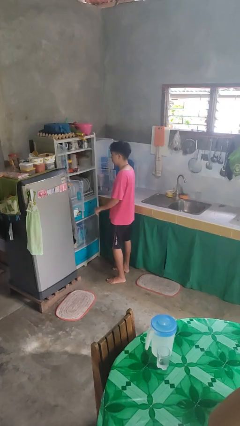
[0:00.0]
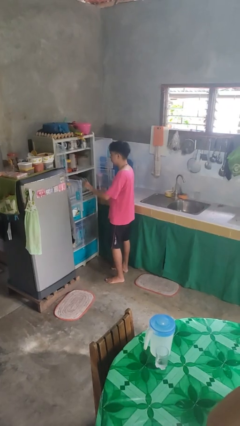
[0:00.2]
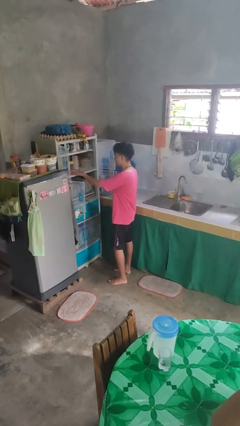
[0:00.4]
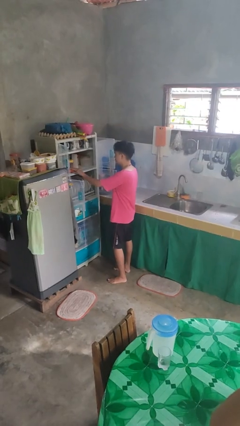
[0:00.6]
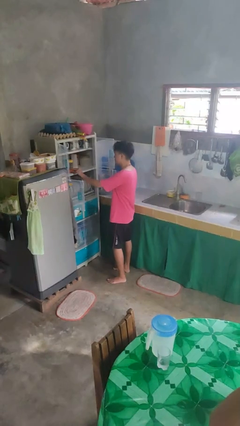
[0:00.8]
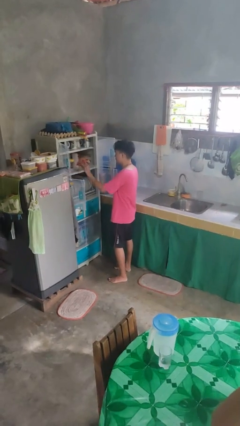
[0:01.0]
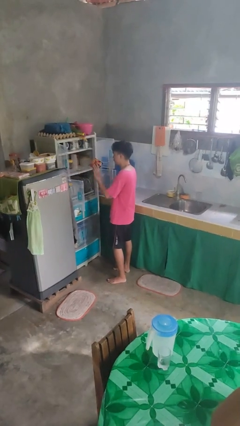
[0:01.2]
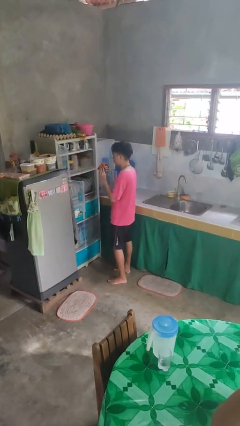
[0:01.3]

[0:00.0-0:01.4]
person takes object from cabinet

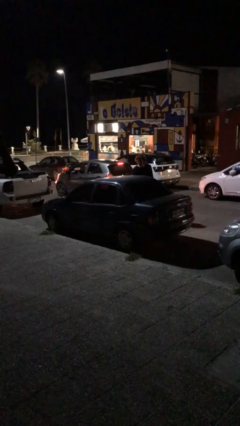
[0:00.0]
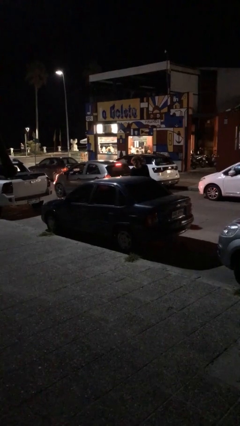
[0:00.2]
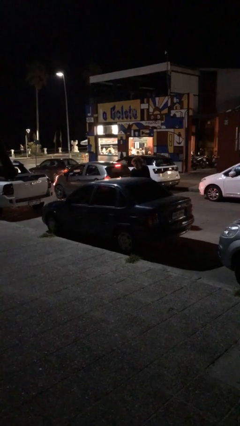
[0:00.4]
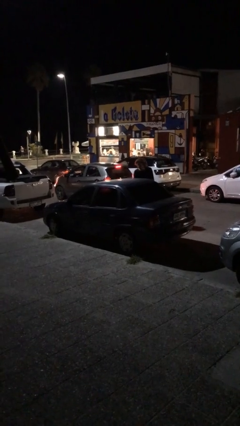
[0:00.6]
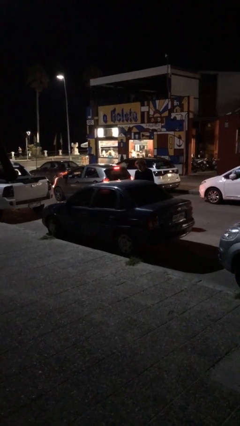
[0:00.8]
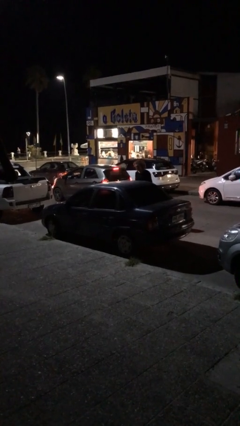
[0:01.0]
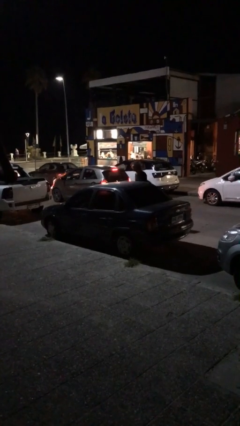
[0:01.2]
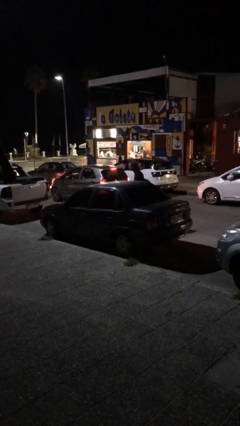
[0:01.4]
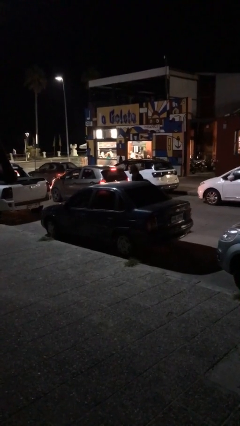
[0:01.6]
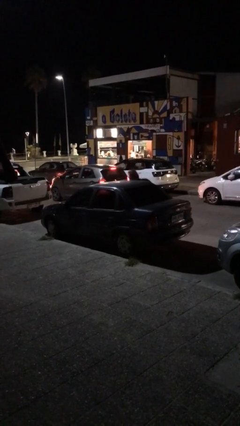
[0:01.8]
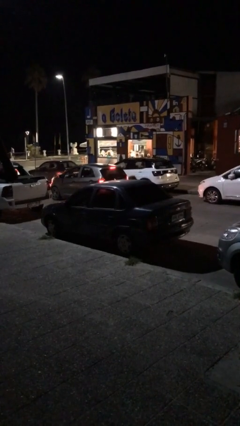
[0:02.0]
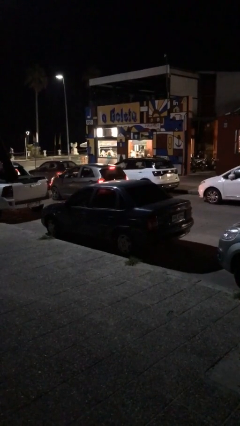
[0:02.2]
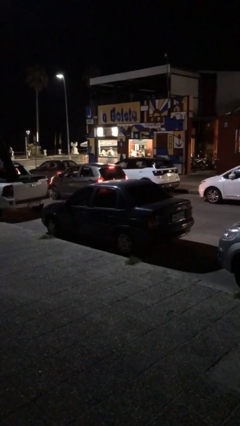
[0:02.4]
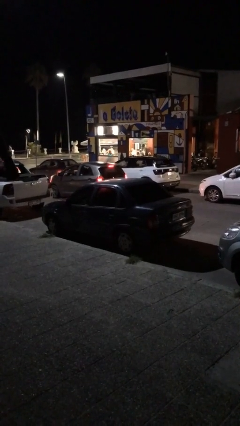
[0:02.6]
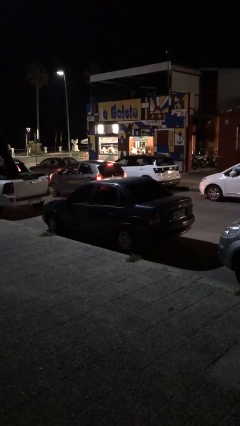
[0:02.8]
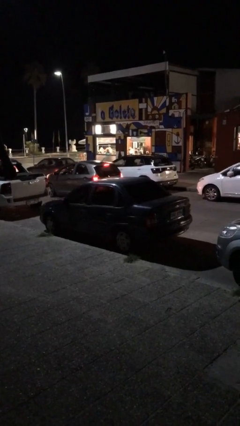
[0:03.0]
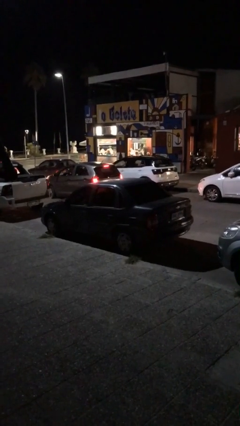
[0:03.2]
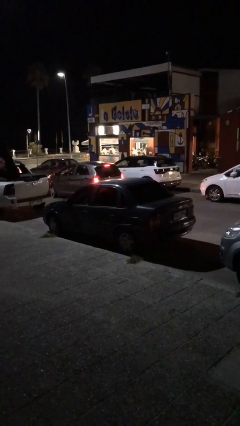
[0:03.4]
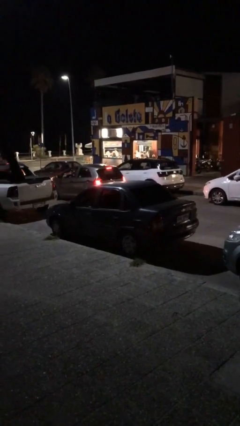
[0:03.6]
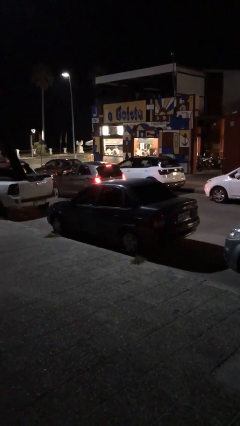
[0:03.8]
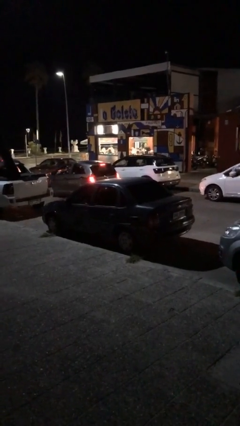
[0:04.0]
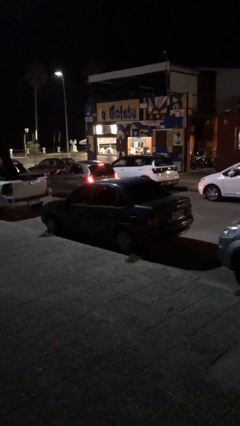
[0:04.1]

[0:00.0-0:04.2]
car picks up person

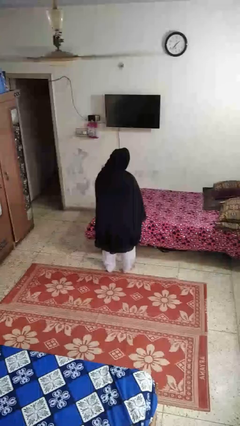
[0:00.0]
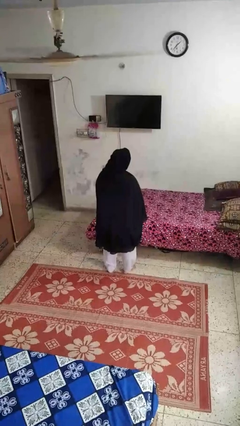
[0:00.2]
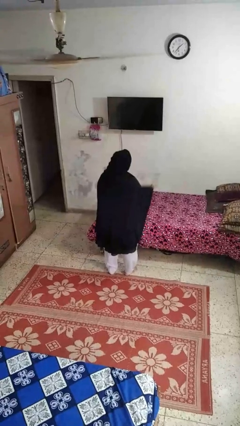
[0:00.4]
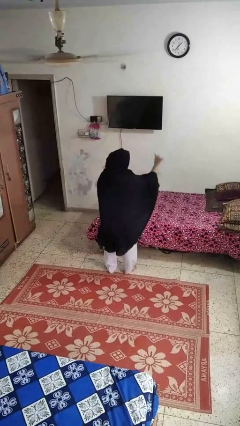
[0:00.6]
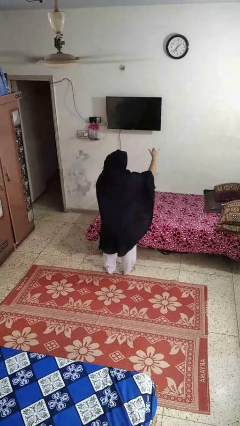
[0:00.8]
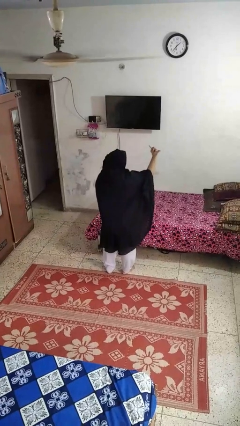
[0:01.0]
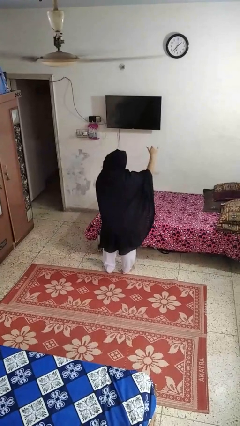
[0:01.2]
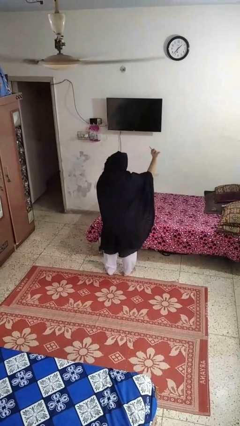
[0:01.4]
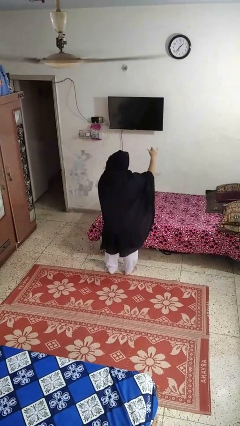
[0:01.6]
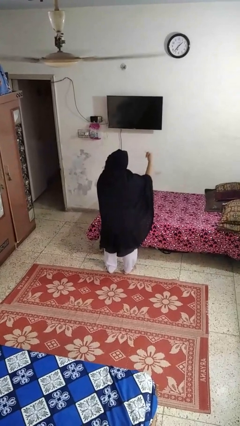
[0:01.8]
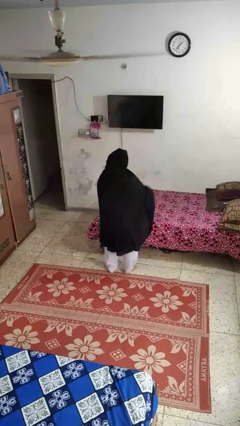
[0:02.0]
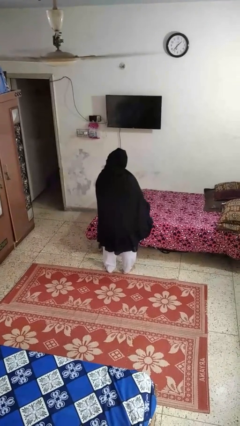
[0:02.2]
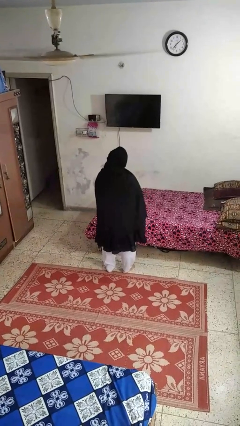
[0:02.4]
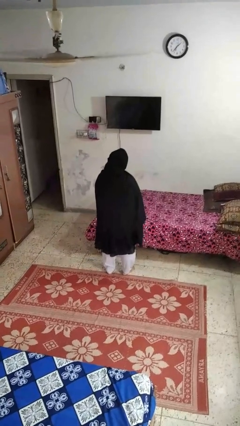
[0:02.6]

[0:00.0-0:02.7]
person gestures hang loose

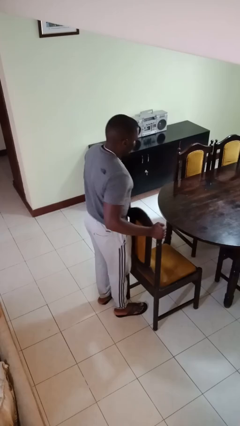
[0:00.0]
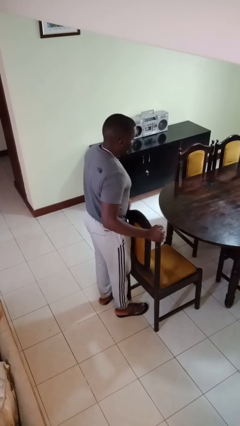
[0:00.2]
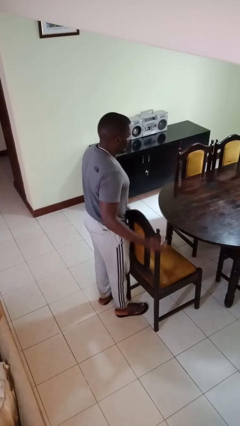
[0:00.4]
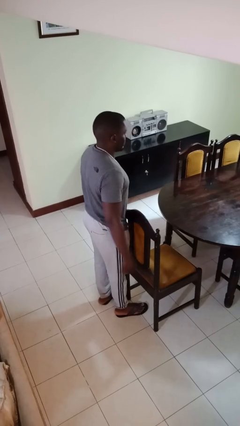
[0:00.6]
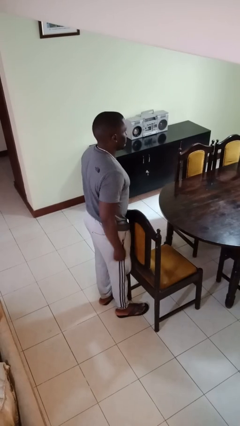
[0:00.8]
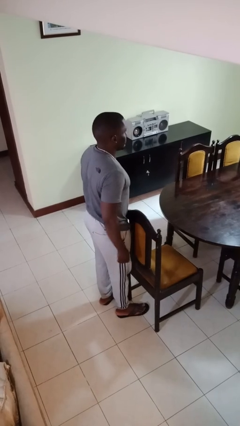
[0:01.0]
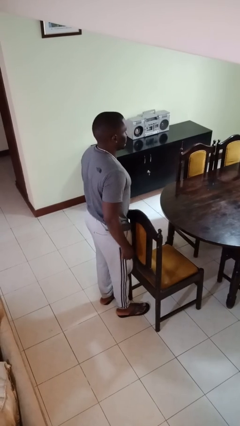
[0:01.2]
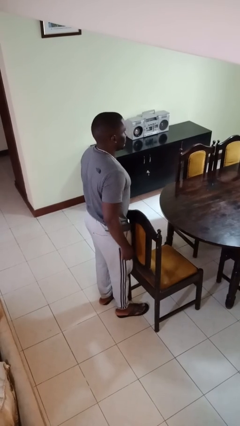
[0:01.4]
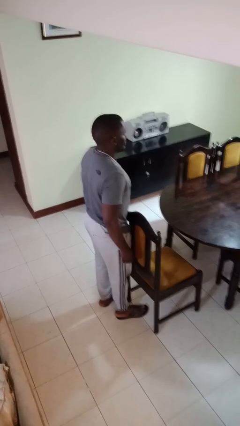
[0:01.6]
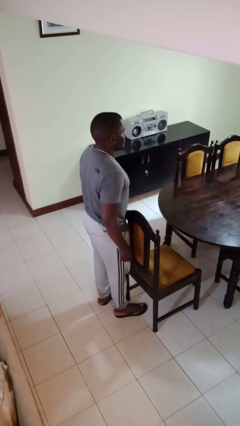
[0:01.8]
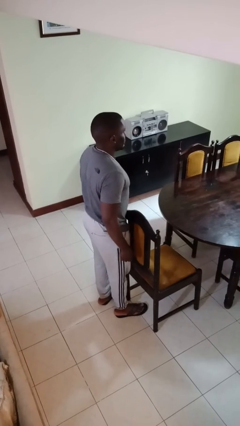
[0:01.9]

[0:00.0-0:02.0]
person pulls out chair

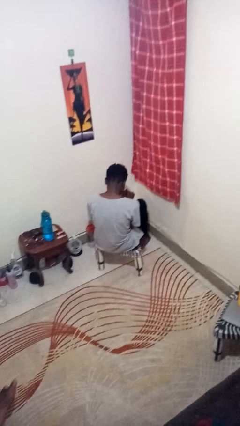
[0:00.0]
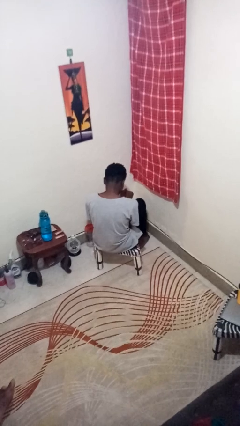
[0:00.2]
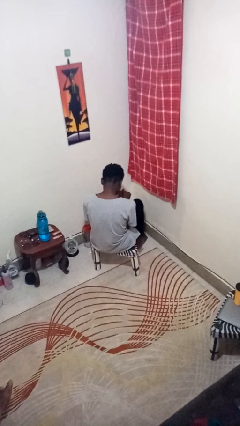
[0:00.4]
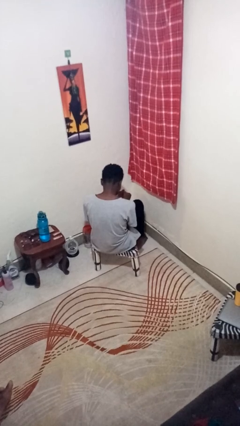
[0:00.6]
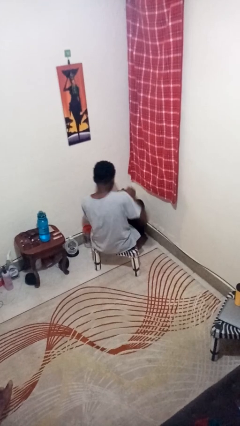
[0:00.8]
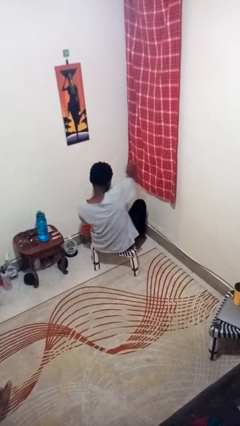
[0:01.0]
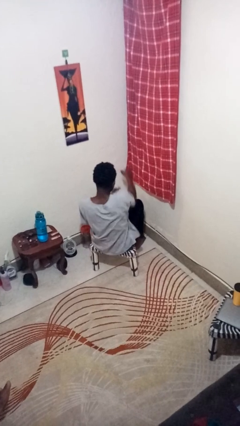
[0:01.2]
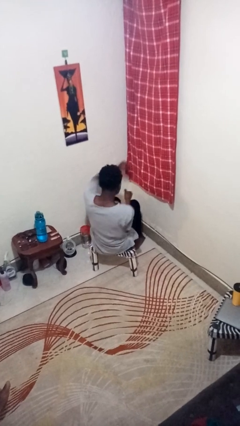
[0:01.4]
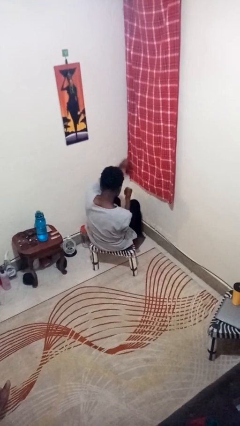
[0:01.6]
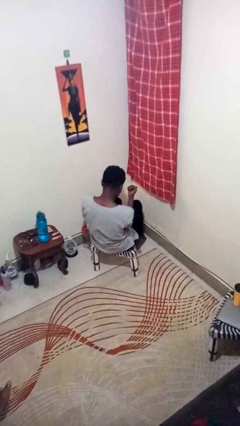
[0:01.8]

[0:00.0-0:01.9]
person punches

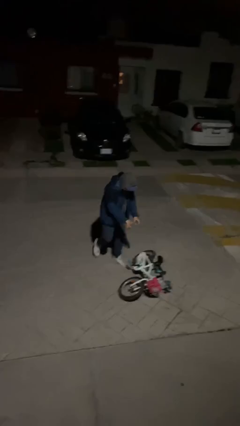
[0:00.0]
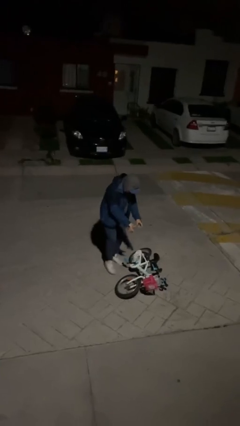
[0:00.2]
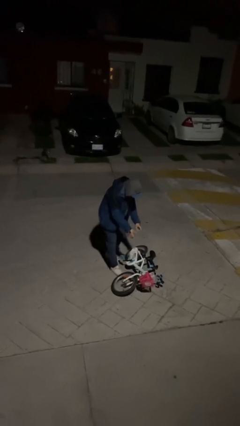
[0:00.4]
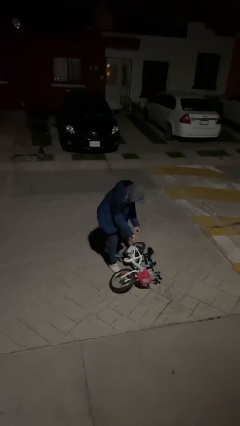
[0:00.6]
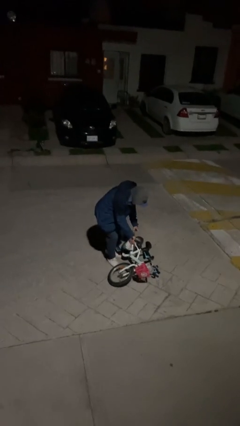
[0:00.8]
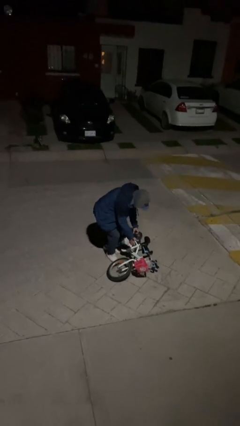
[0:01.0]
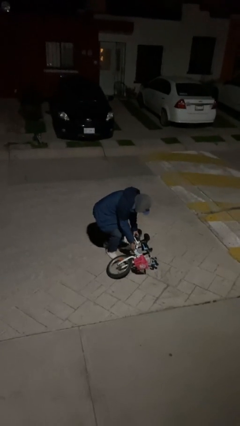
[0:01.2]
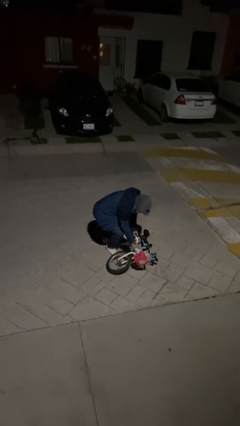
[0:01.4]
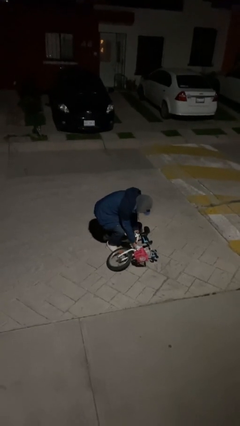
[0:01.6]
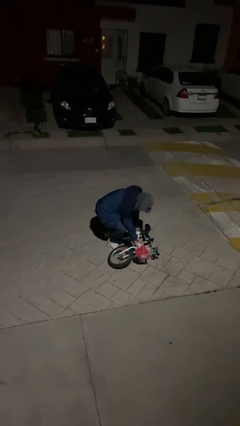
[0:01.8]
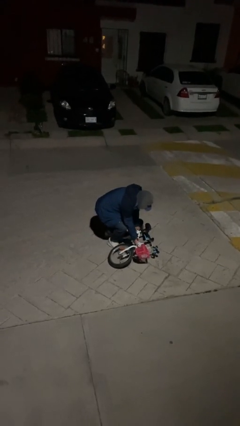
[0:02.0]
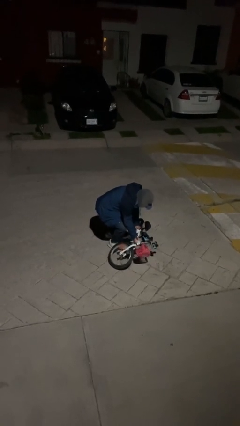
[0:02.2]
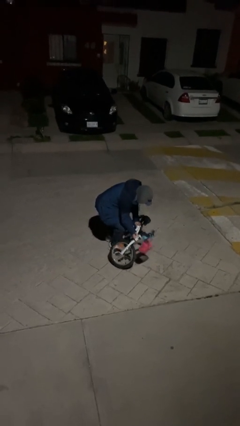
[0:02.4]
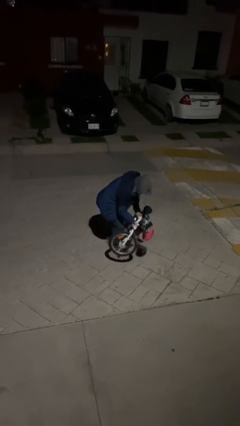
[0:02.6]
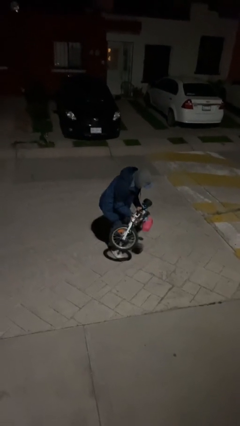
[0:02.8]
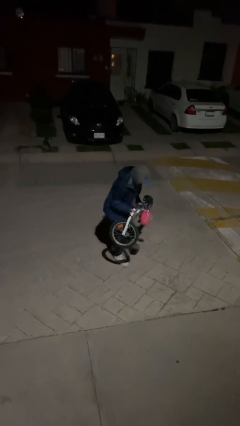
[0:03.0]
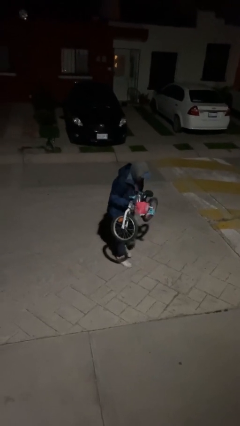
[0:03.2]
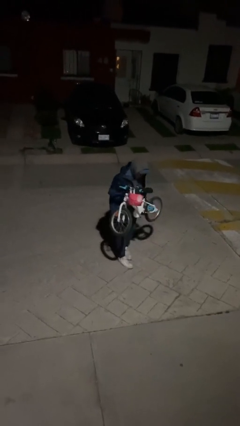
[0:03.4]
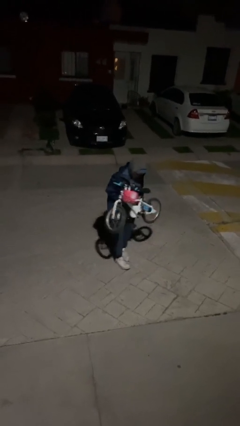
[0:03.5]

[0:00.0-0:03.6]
person picks up object from floor

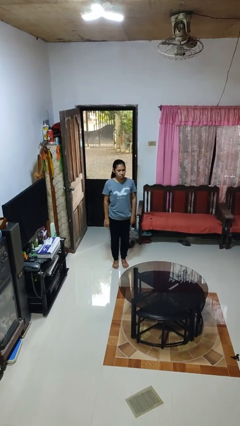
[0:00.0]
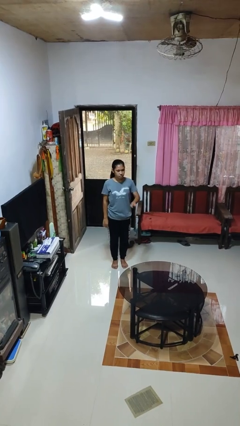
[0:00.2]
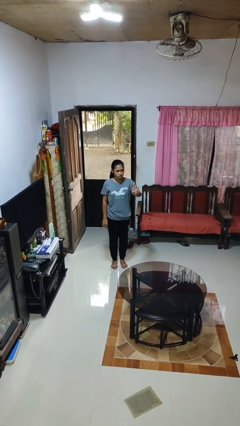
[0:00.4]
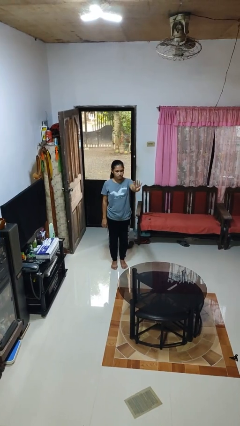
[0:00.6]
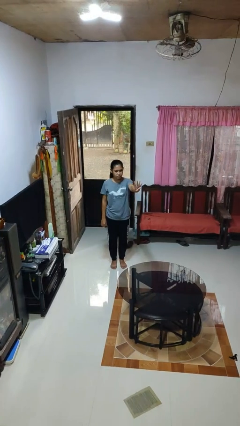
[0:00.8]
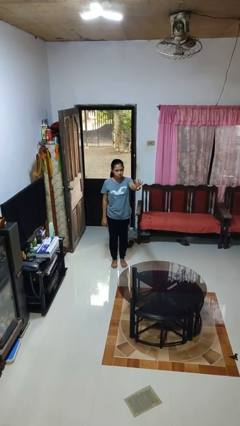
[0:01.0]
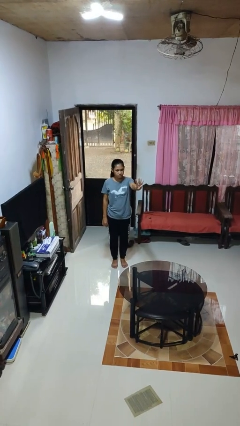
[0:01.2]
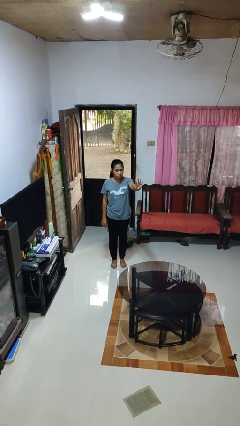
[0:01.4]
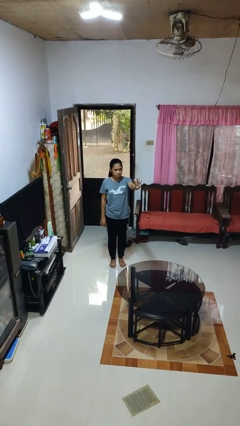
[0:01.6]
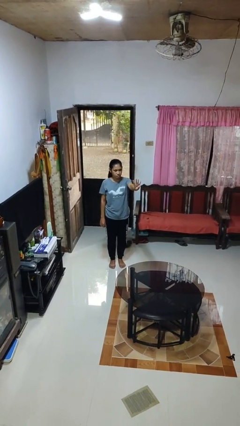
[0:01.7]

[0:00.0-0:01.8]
person gestures number four
